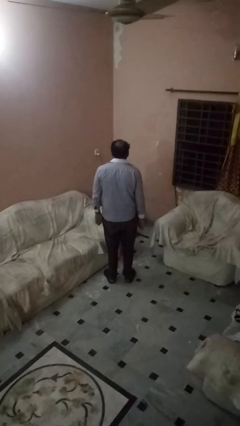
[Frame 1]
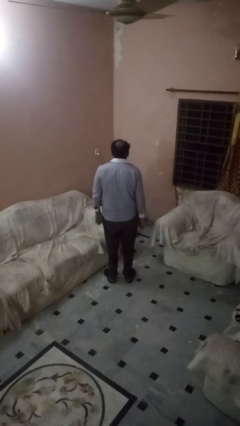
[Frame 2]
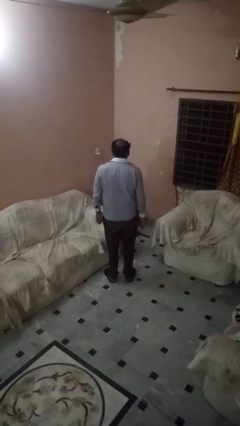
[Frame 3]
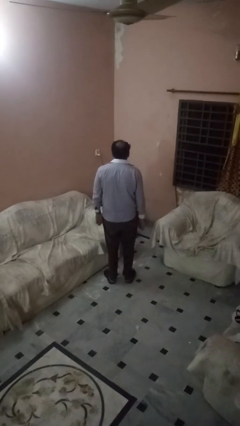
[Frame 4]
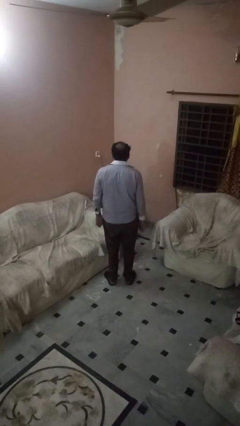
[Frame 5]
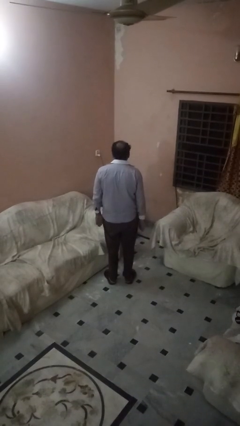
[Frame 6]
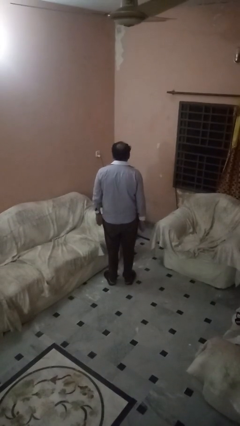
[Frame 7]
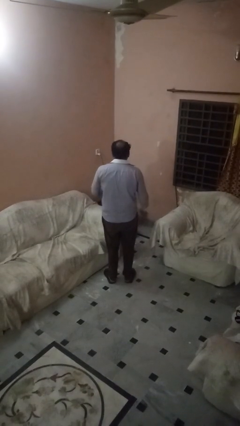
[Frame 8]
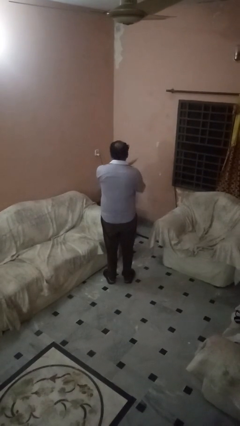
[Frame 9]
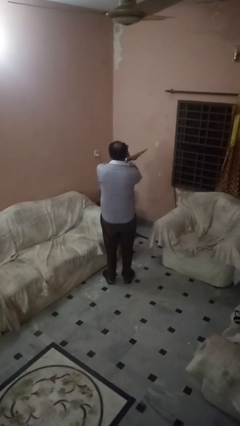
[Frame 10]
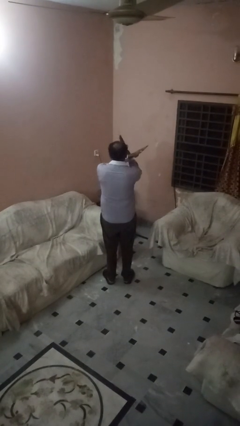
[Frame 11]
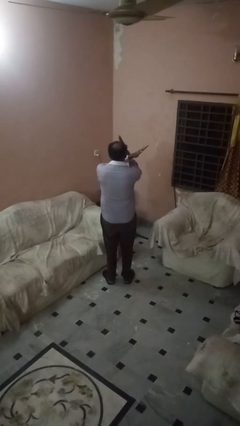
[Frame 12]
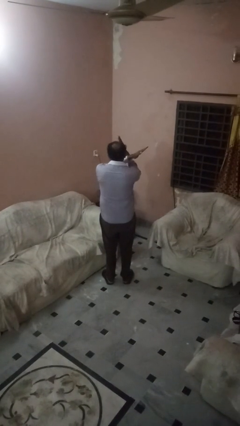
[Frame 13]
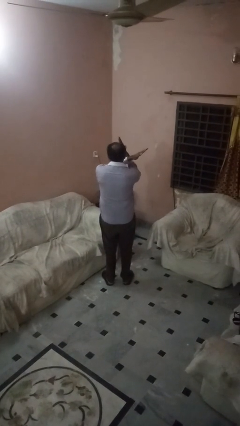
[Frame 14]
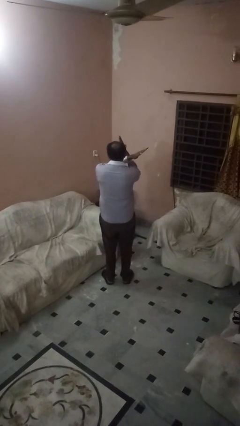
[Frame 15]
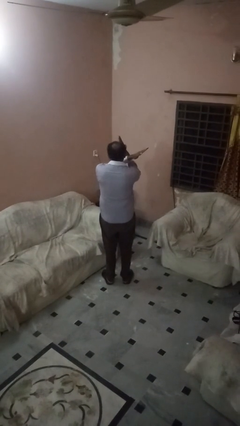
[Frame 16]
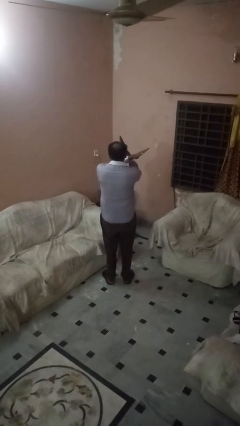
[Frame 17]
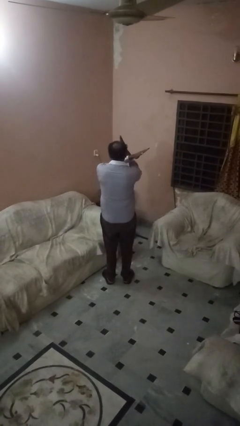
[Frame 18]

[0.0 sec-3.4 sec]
person gestures arms x

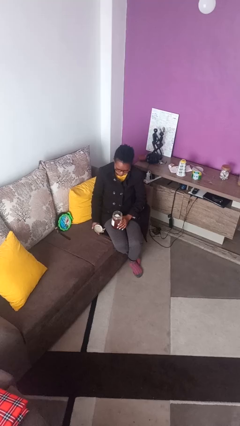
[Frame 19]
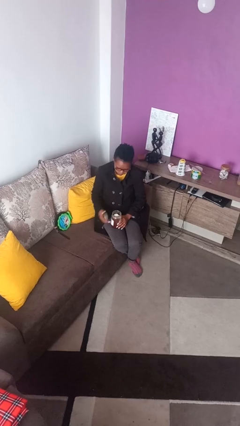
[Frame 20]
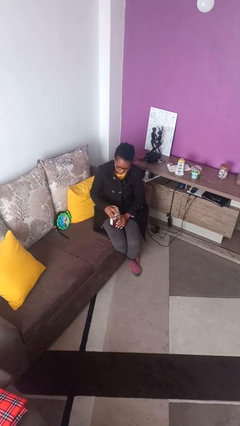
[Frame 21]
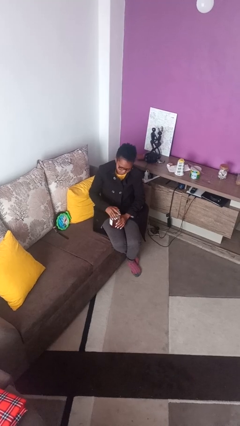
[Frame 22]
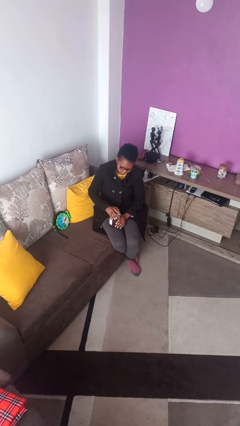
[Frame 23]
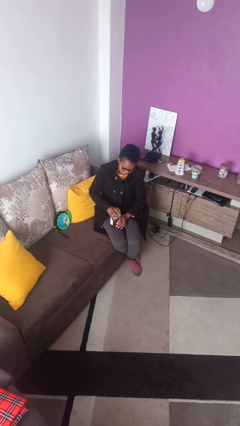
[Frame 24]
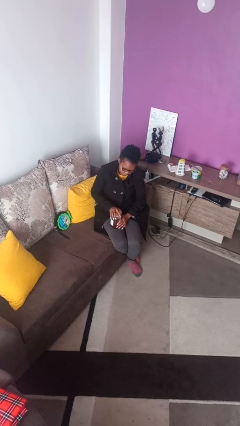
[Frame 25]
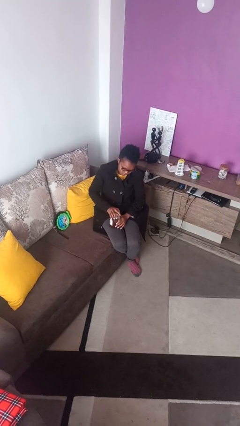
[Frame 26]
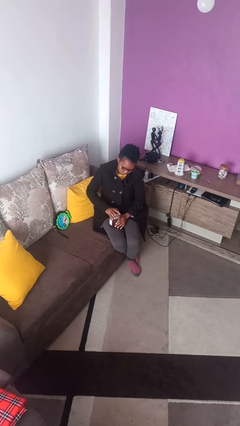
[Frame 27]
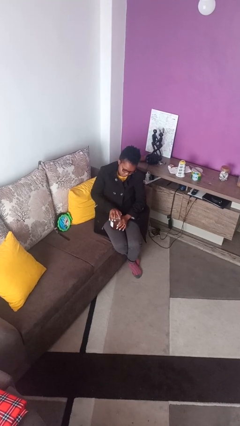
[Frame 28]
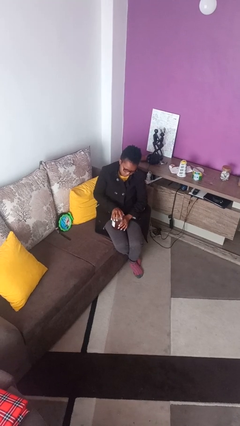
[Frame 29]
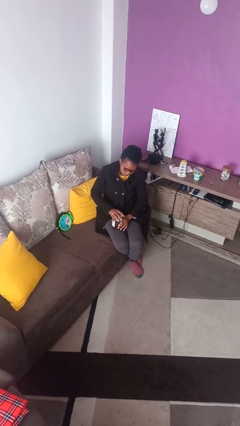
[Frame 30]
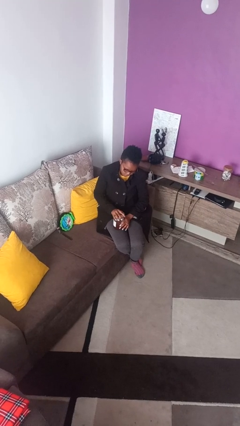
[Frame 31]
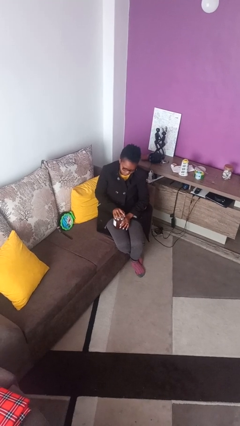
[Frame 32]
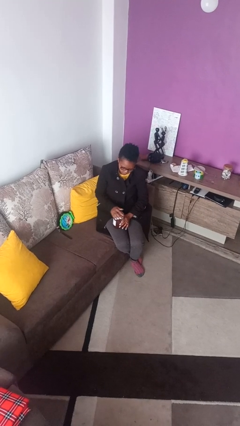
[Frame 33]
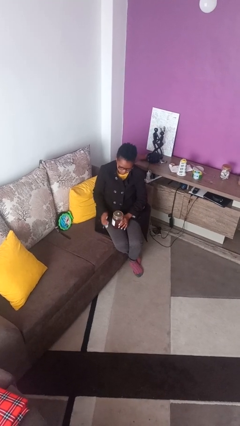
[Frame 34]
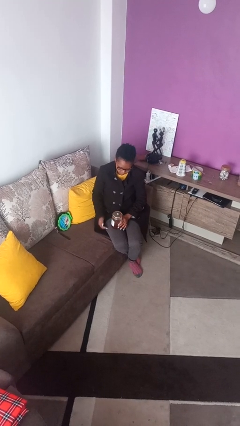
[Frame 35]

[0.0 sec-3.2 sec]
person closes jar

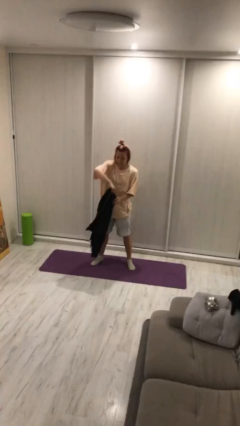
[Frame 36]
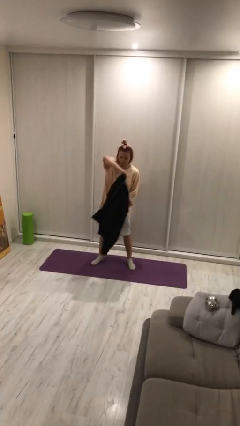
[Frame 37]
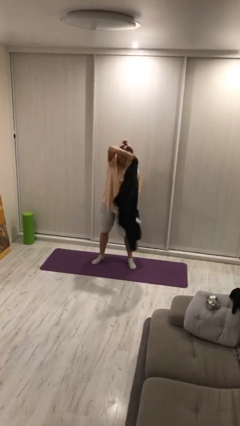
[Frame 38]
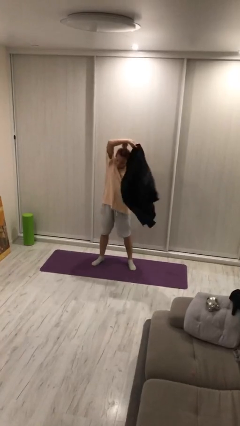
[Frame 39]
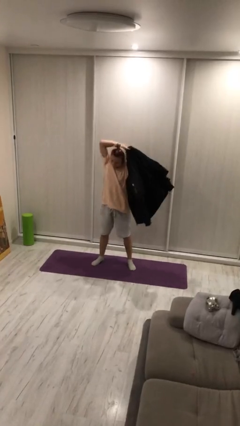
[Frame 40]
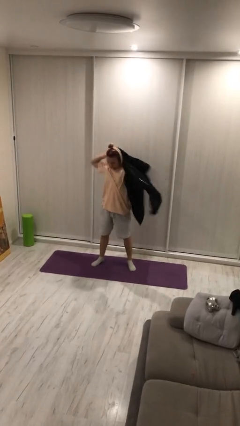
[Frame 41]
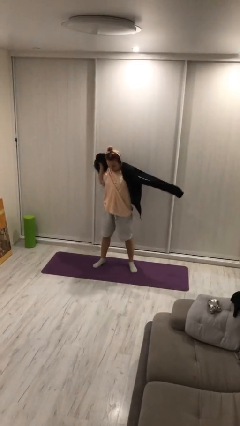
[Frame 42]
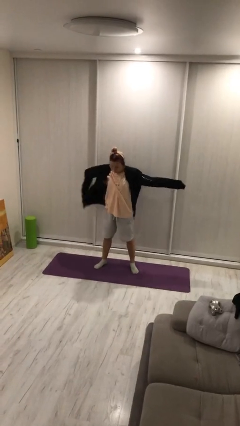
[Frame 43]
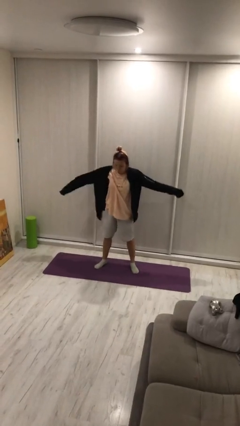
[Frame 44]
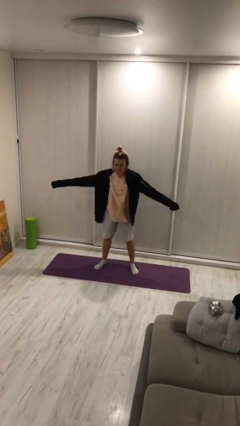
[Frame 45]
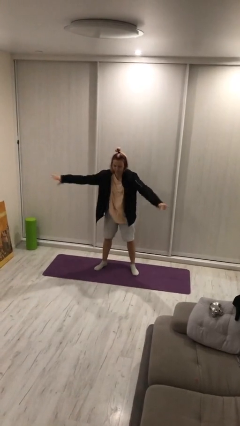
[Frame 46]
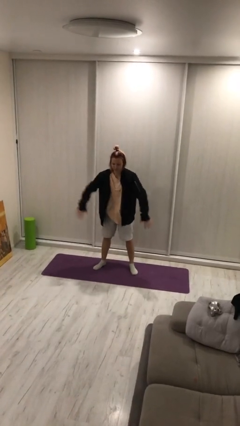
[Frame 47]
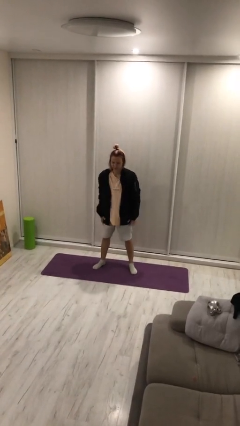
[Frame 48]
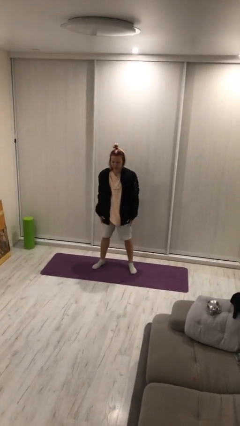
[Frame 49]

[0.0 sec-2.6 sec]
person puts on jacket

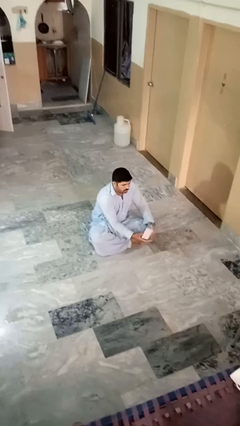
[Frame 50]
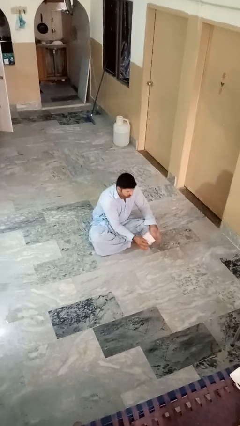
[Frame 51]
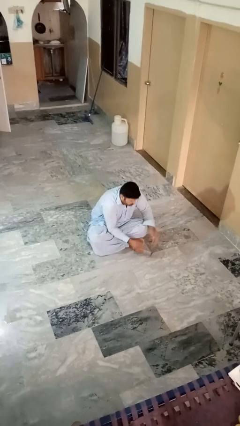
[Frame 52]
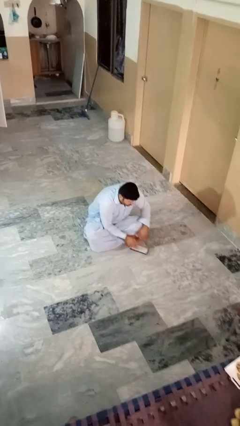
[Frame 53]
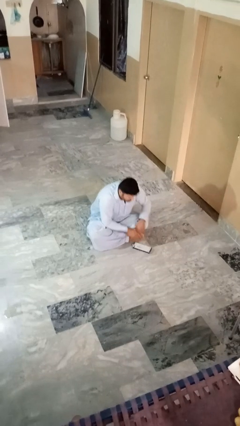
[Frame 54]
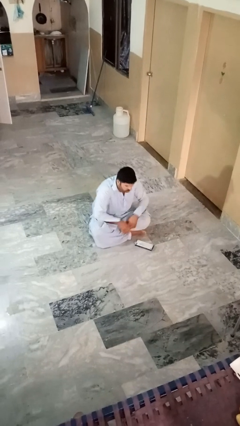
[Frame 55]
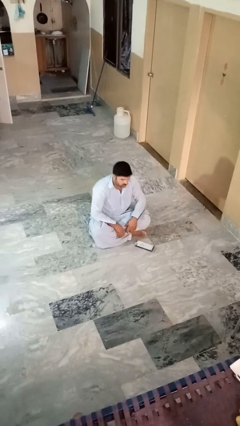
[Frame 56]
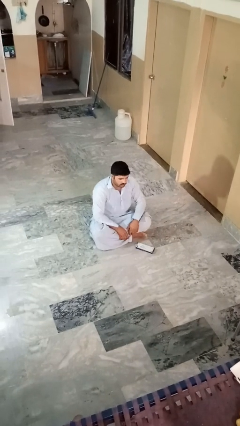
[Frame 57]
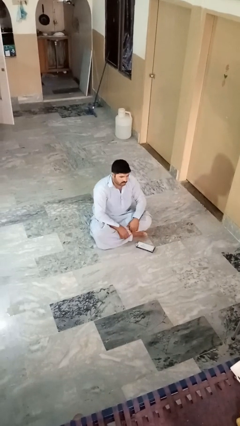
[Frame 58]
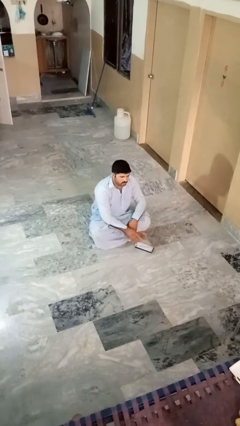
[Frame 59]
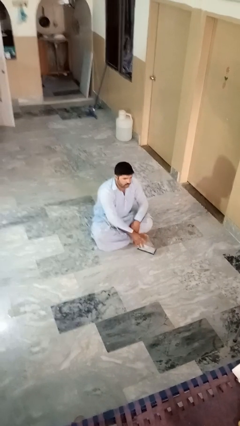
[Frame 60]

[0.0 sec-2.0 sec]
person catches dropped object

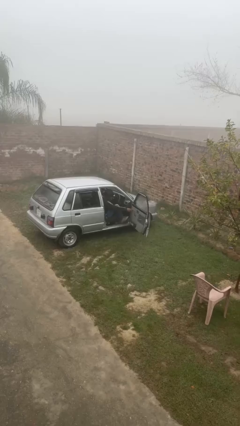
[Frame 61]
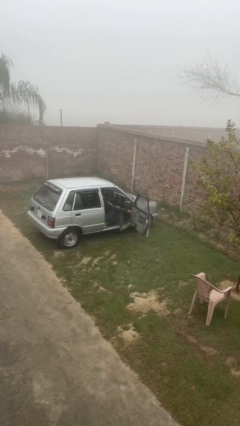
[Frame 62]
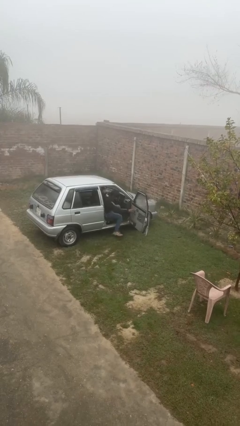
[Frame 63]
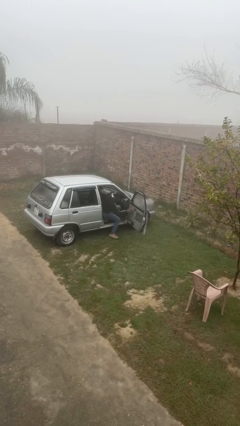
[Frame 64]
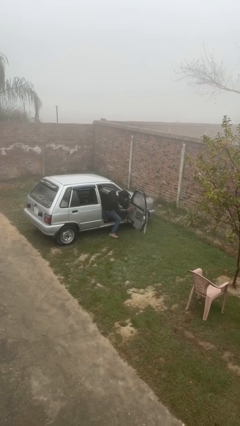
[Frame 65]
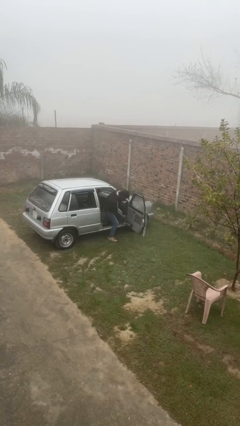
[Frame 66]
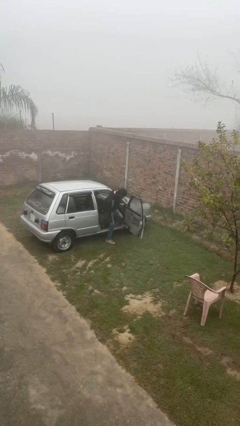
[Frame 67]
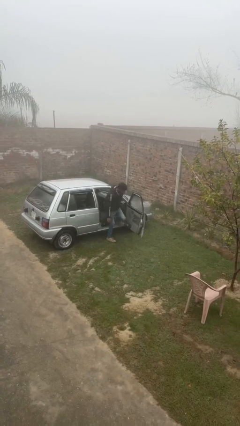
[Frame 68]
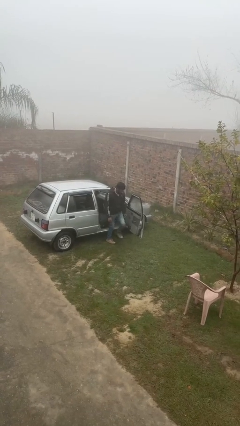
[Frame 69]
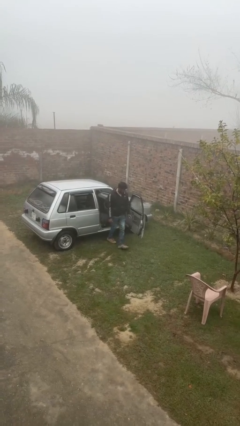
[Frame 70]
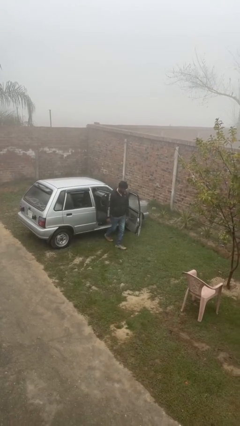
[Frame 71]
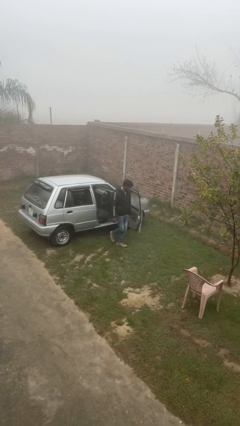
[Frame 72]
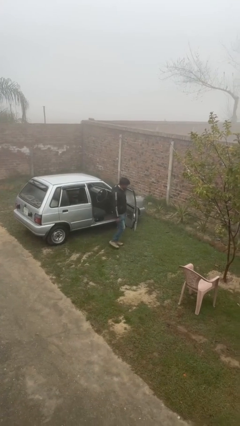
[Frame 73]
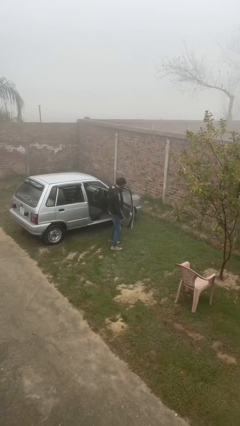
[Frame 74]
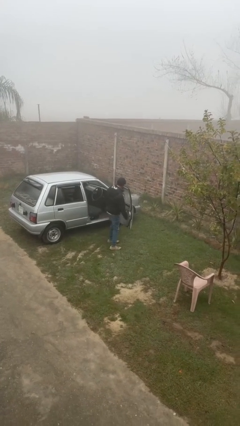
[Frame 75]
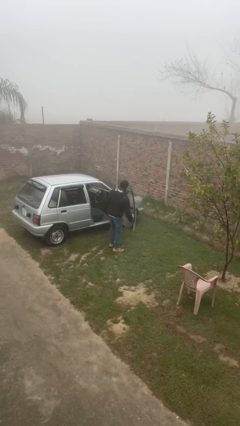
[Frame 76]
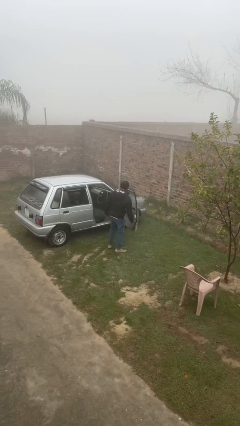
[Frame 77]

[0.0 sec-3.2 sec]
person exits car

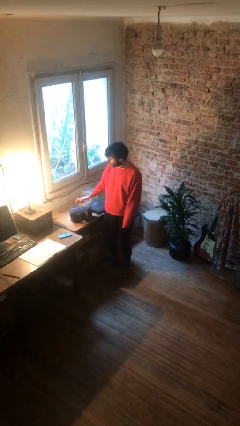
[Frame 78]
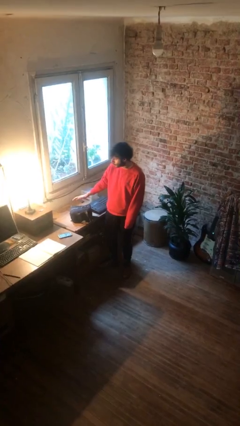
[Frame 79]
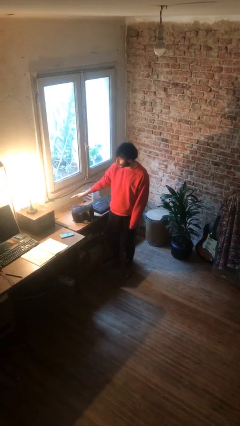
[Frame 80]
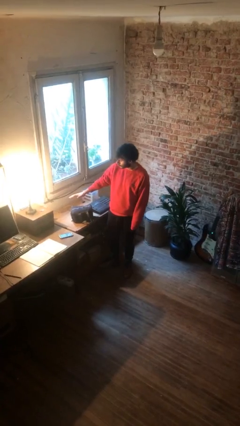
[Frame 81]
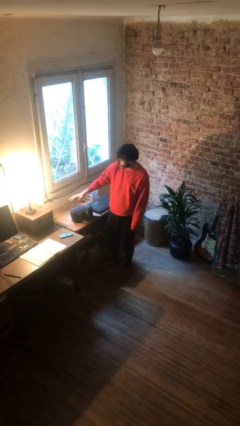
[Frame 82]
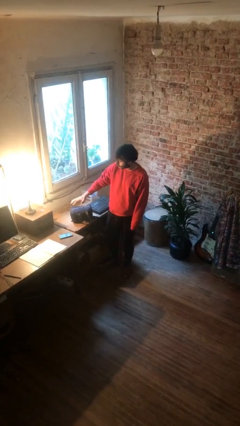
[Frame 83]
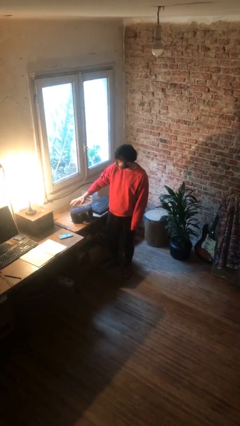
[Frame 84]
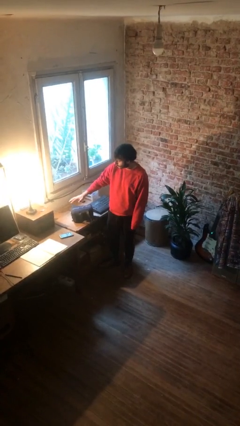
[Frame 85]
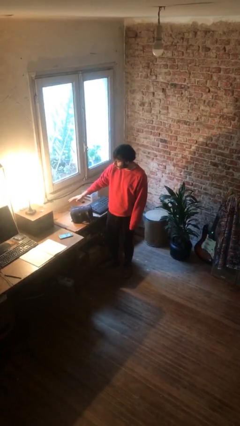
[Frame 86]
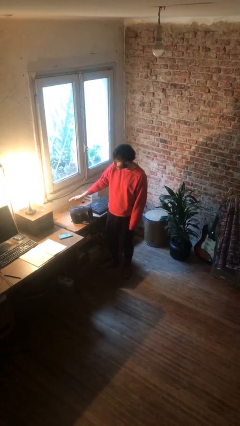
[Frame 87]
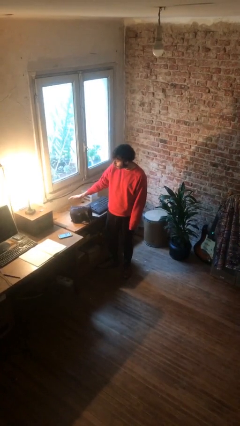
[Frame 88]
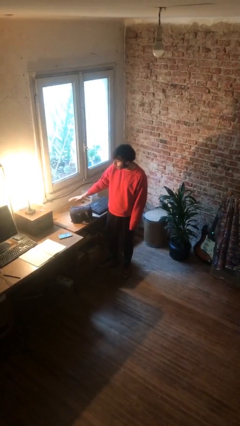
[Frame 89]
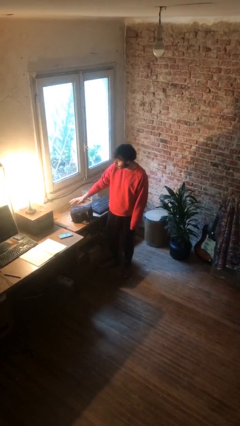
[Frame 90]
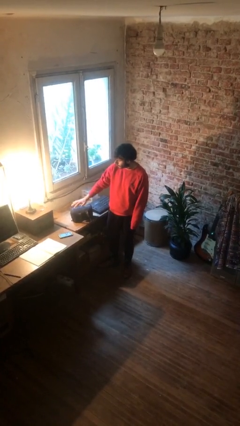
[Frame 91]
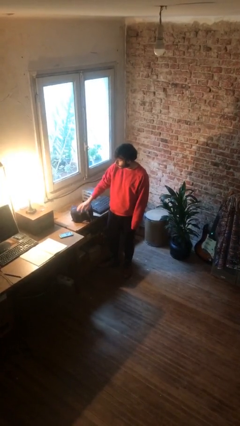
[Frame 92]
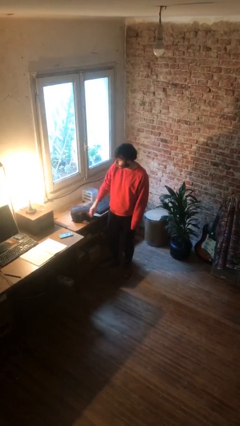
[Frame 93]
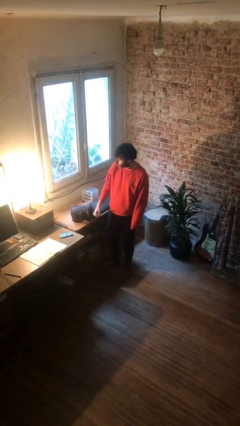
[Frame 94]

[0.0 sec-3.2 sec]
person waves hand over object
